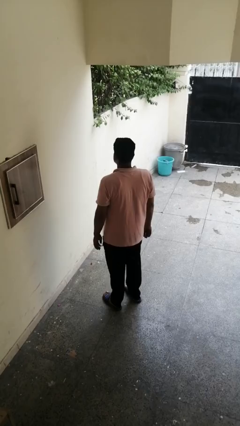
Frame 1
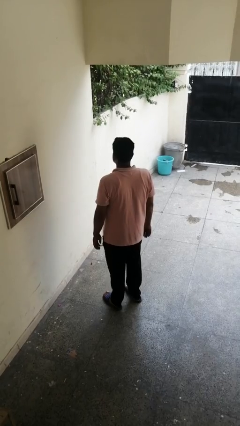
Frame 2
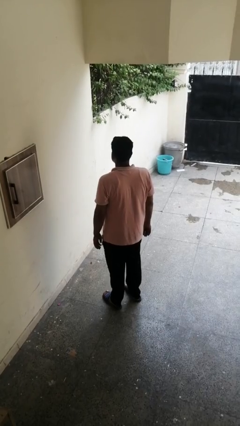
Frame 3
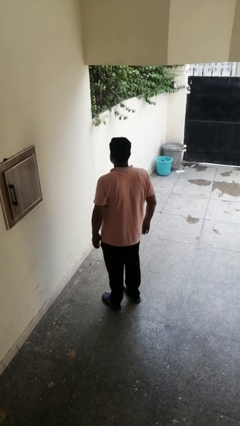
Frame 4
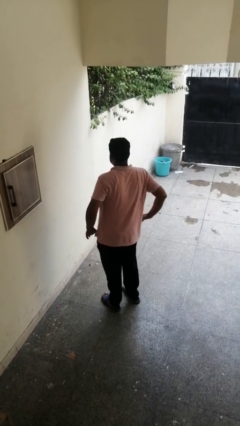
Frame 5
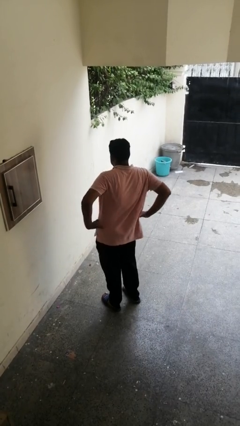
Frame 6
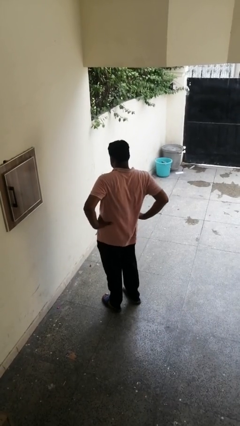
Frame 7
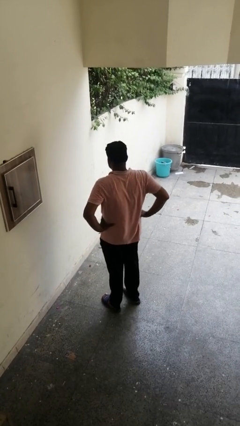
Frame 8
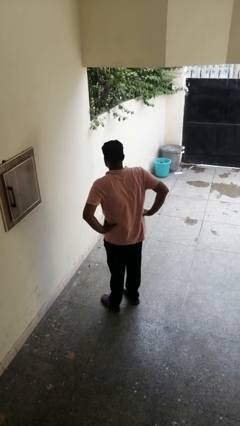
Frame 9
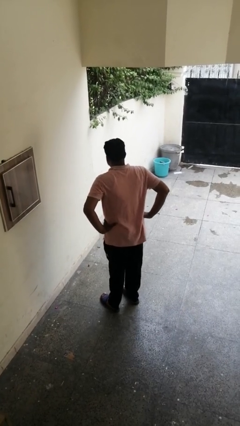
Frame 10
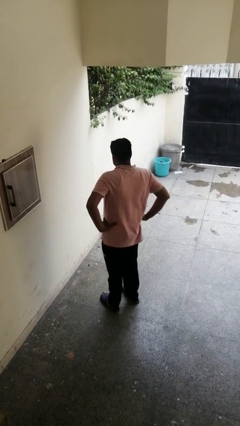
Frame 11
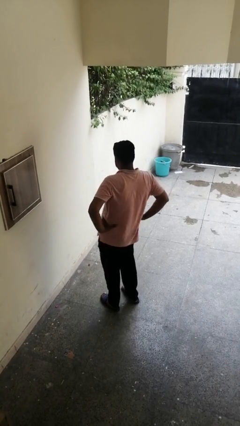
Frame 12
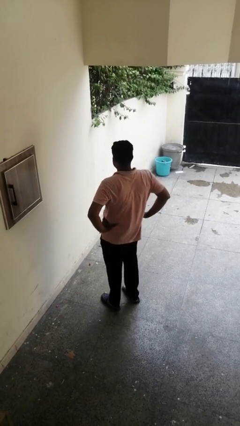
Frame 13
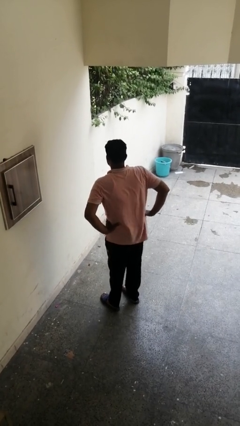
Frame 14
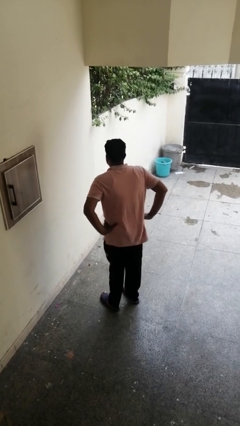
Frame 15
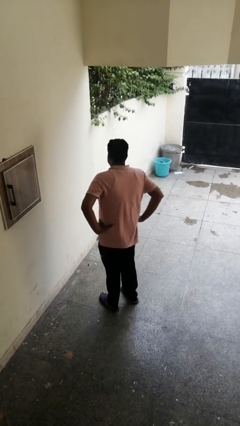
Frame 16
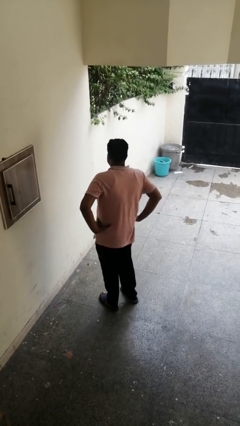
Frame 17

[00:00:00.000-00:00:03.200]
person wiggles hips

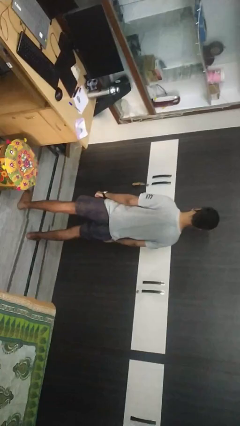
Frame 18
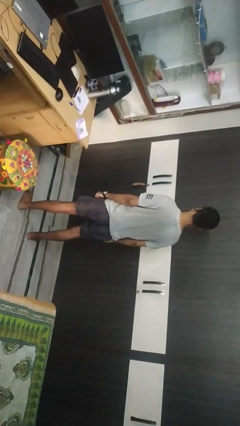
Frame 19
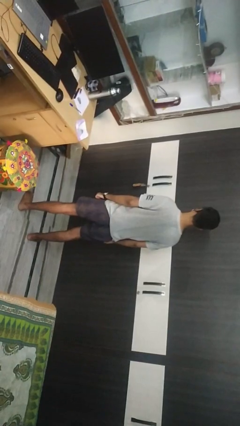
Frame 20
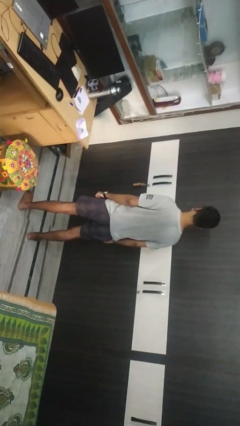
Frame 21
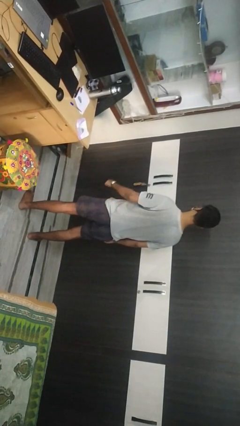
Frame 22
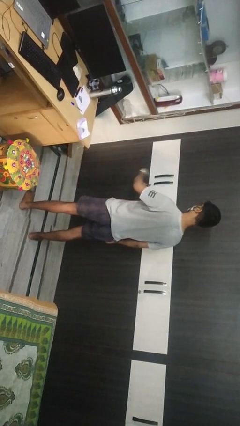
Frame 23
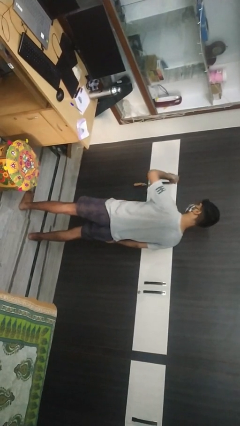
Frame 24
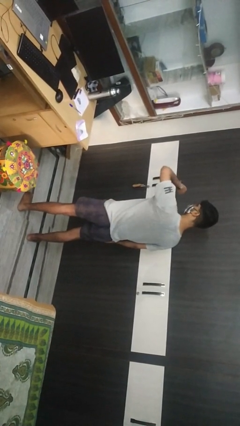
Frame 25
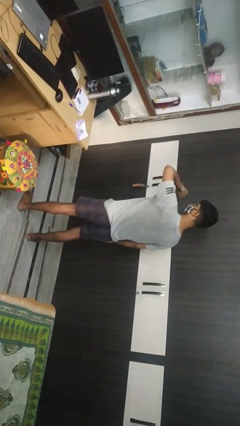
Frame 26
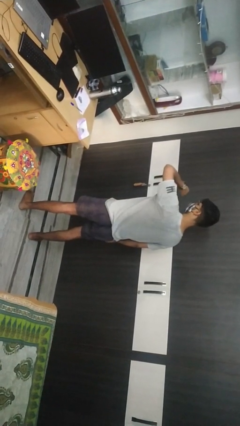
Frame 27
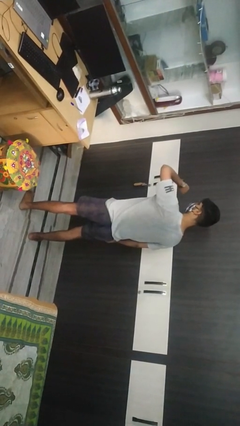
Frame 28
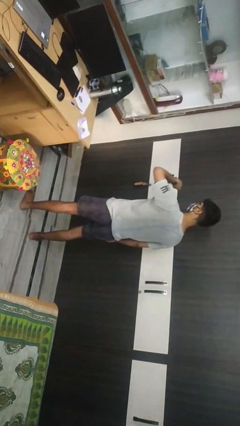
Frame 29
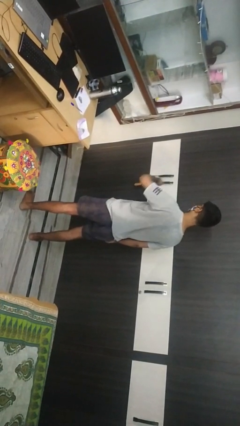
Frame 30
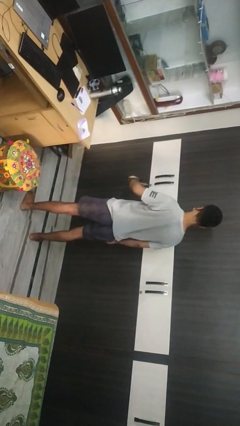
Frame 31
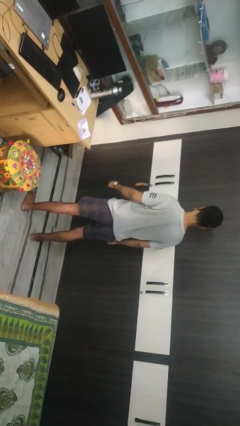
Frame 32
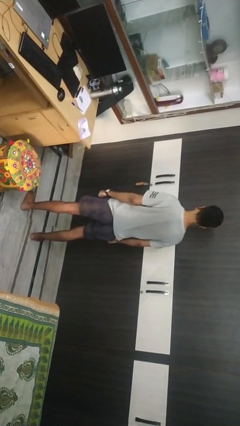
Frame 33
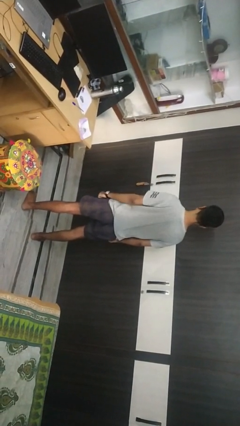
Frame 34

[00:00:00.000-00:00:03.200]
person looks at wristwatch

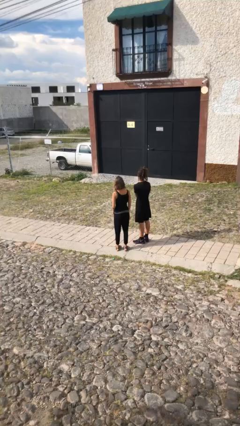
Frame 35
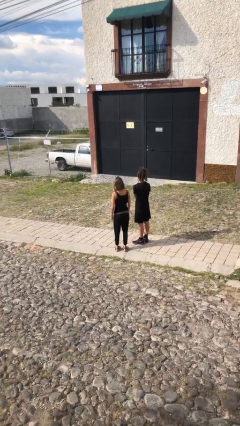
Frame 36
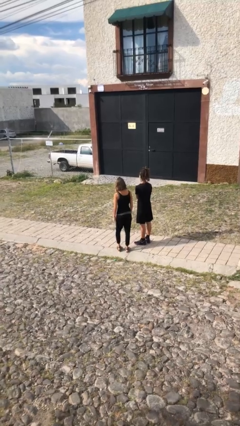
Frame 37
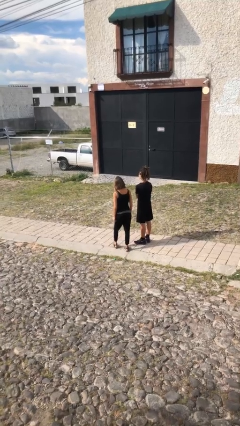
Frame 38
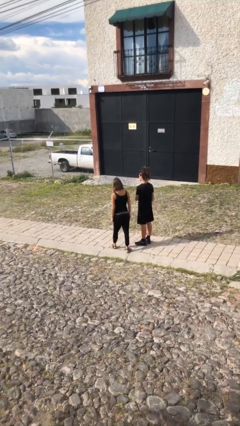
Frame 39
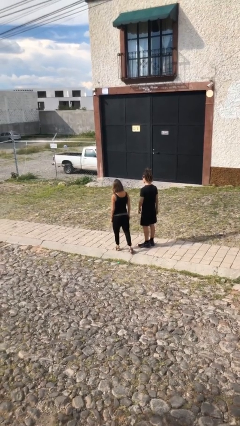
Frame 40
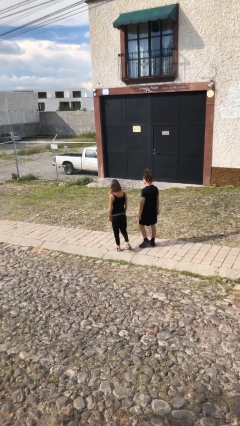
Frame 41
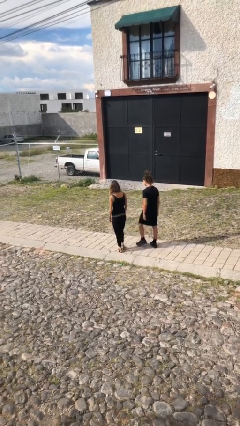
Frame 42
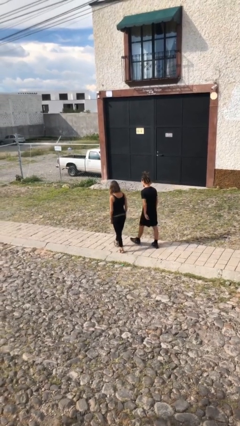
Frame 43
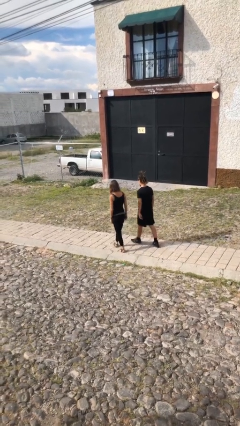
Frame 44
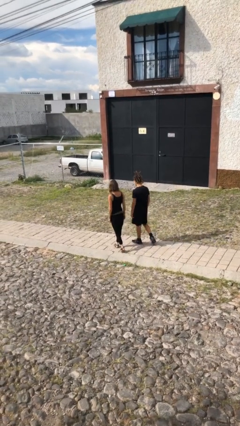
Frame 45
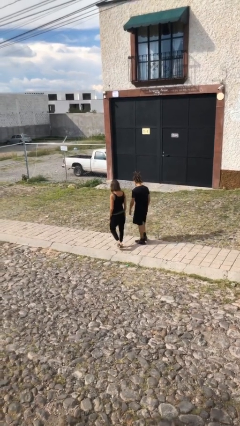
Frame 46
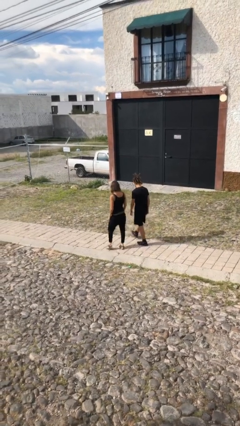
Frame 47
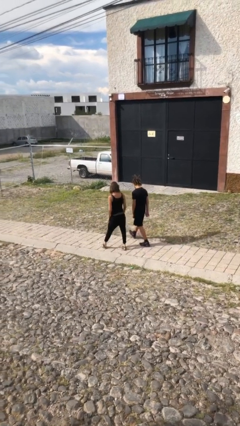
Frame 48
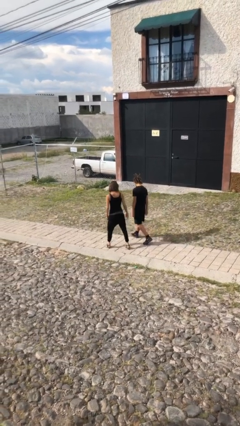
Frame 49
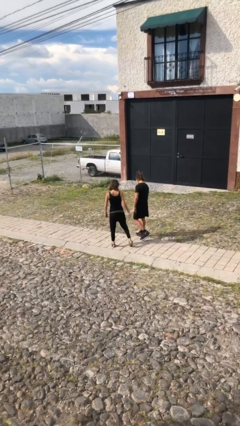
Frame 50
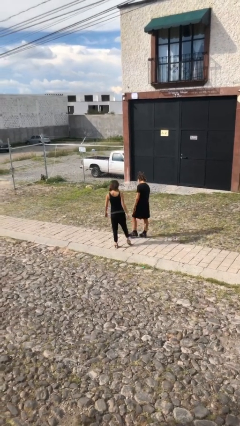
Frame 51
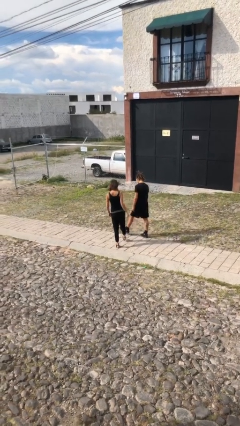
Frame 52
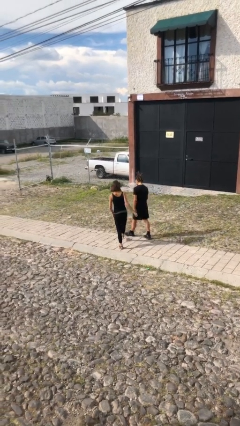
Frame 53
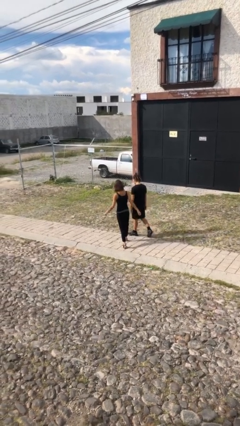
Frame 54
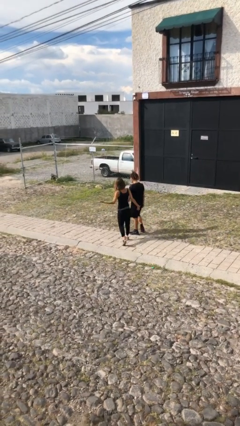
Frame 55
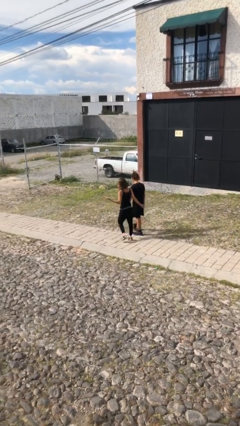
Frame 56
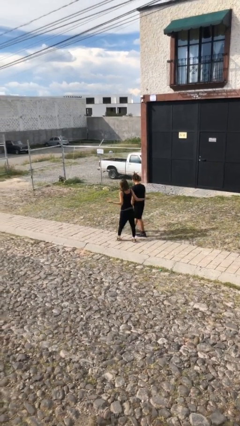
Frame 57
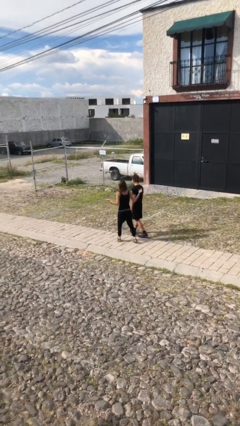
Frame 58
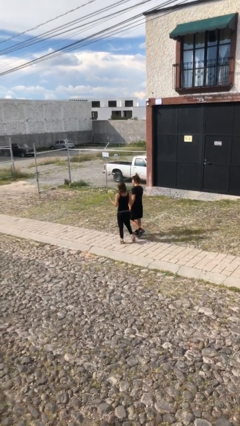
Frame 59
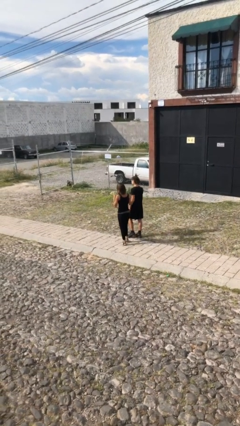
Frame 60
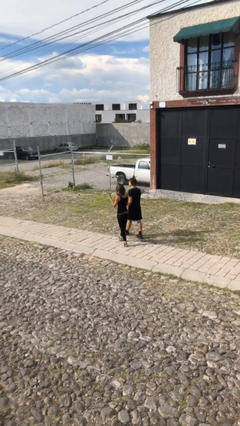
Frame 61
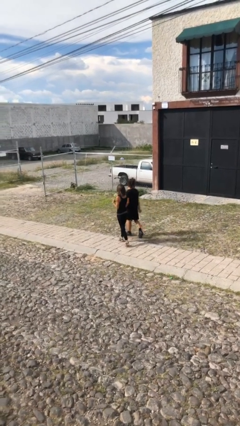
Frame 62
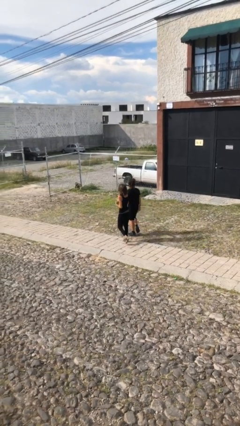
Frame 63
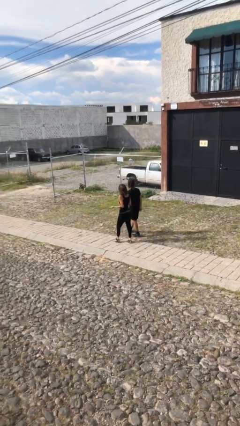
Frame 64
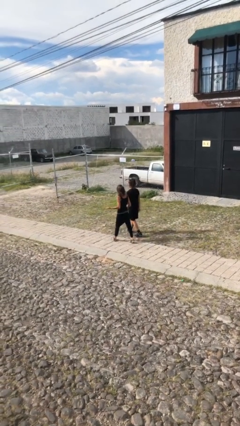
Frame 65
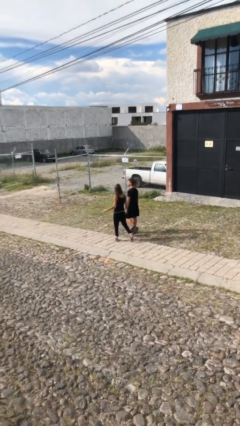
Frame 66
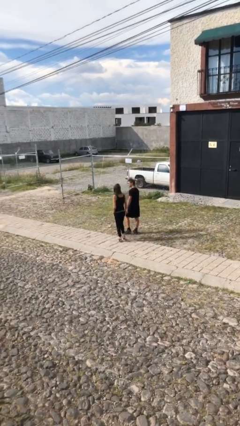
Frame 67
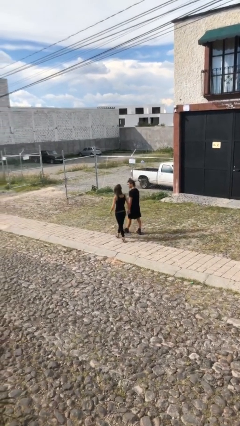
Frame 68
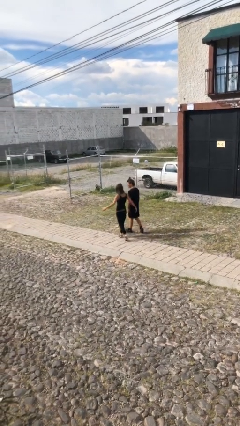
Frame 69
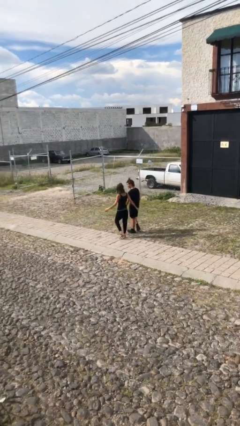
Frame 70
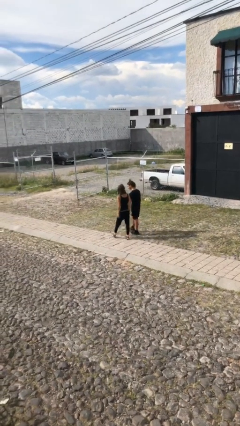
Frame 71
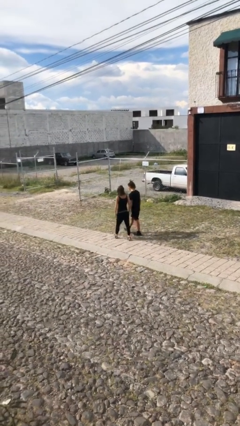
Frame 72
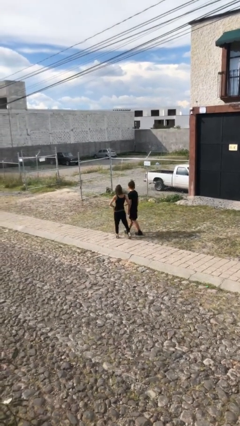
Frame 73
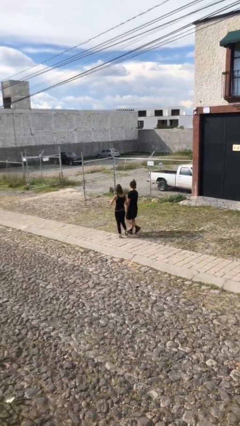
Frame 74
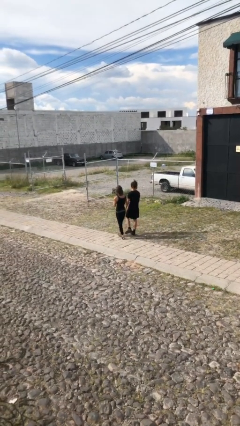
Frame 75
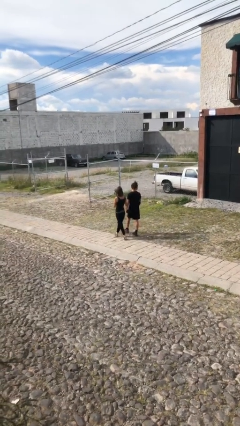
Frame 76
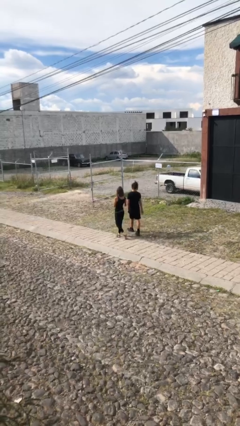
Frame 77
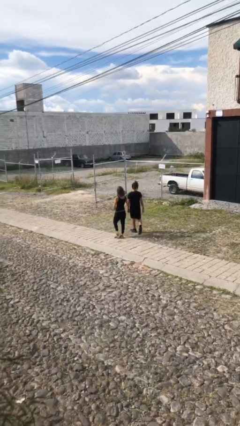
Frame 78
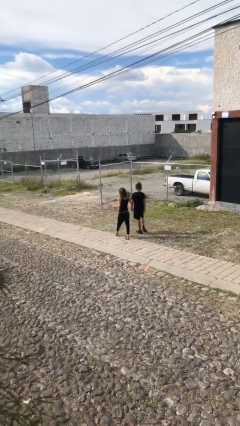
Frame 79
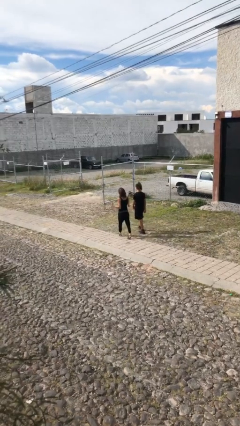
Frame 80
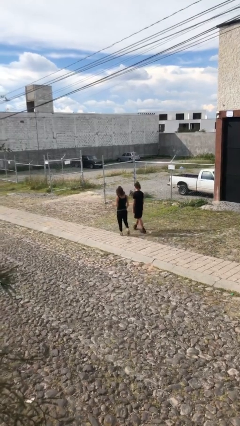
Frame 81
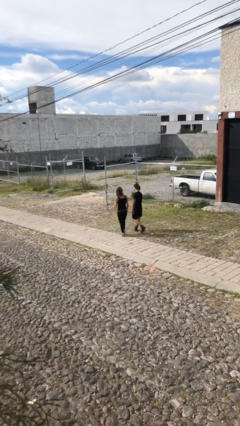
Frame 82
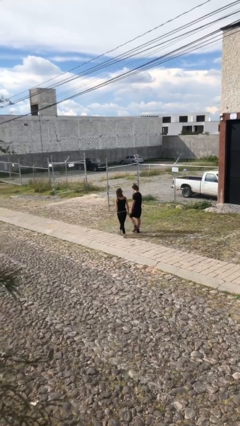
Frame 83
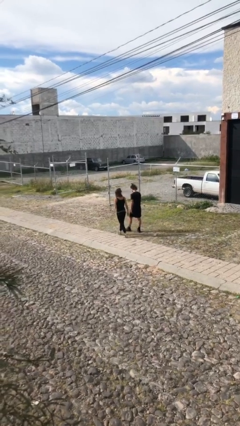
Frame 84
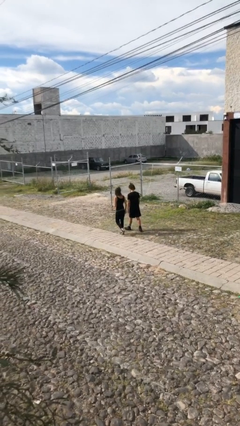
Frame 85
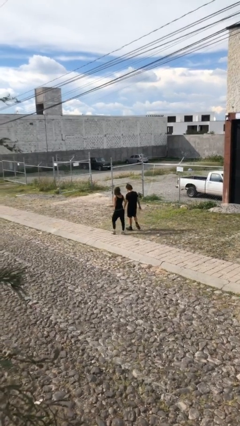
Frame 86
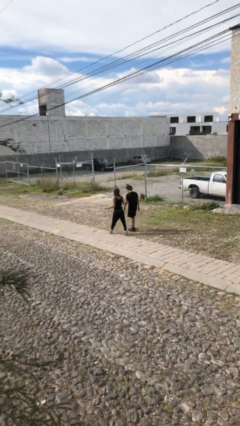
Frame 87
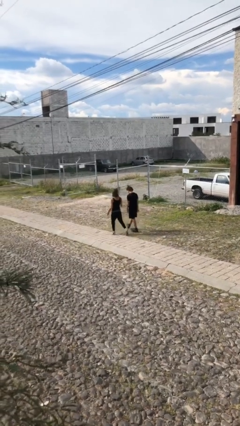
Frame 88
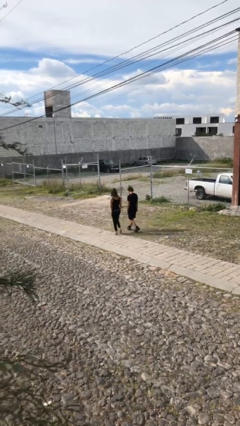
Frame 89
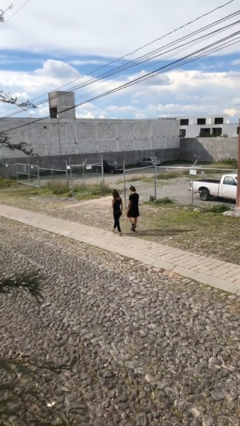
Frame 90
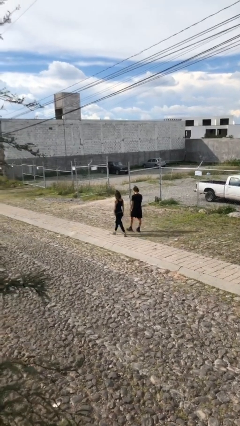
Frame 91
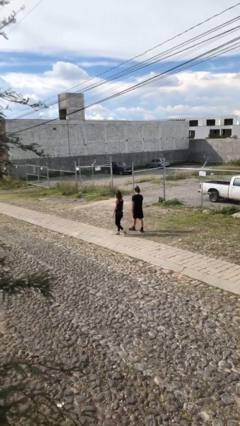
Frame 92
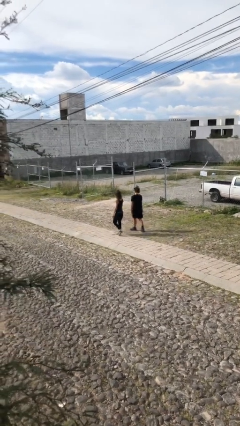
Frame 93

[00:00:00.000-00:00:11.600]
person talks to person
